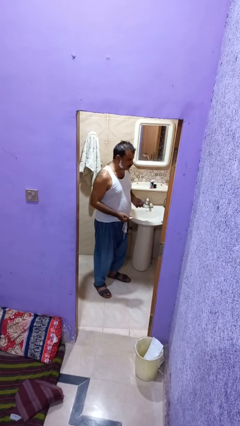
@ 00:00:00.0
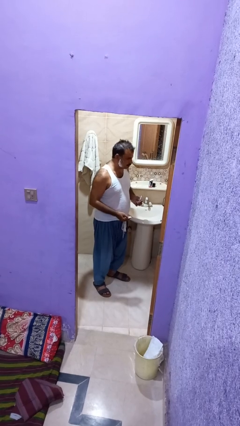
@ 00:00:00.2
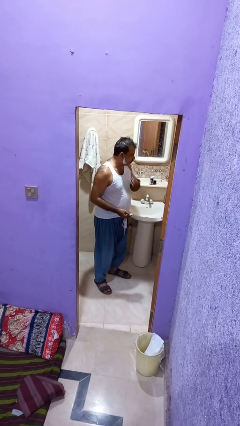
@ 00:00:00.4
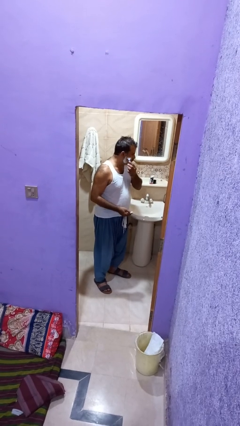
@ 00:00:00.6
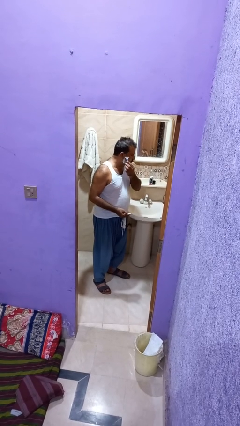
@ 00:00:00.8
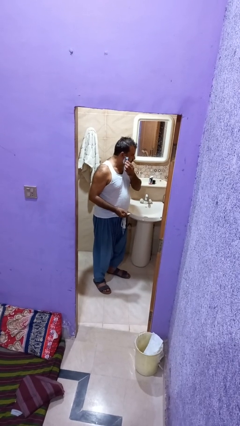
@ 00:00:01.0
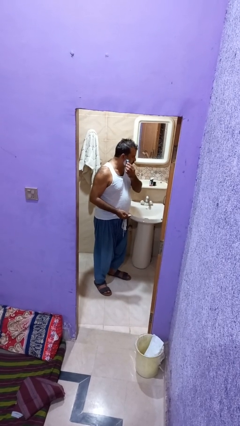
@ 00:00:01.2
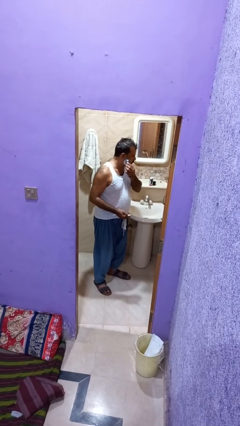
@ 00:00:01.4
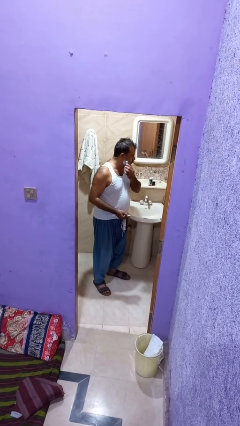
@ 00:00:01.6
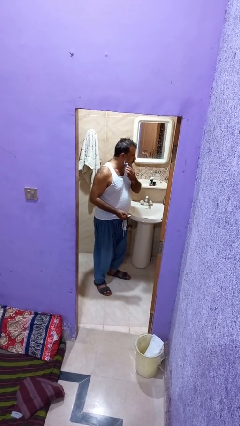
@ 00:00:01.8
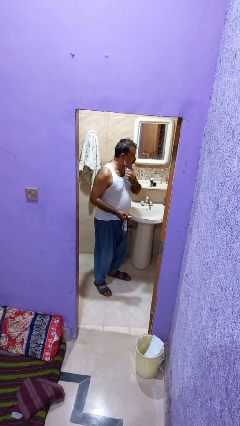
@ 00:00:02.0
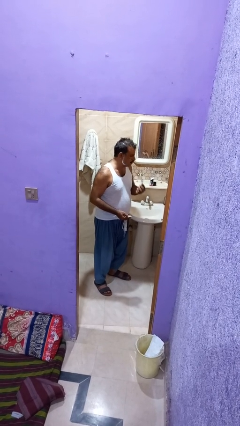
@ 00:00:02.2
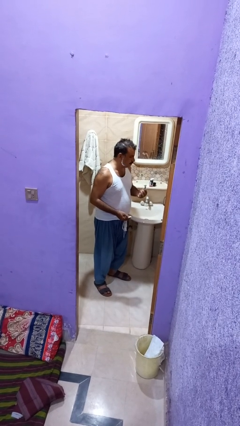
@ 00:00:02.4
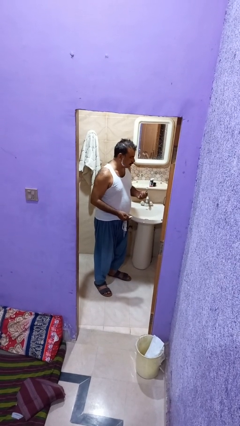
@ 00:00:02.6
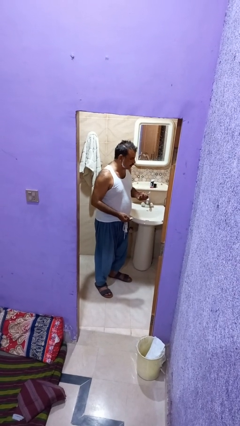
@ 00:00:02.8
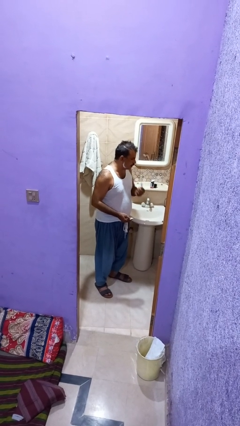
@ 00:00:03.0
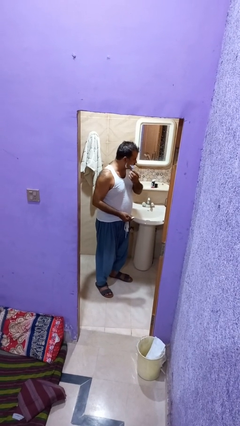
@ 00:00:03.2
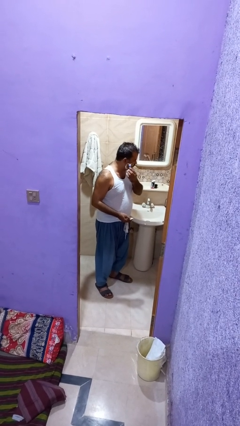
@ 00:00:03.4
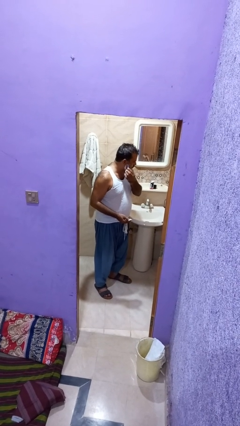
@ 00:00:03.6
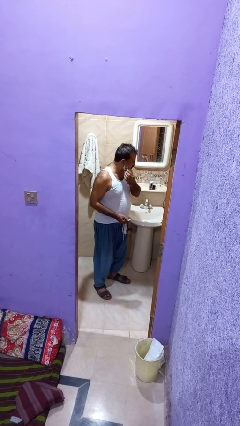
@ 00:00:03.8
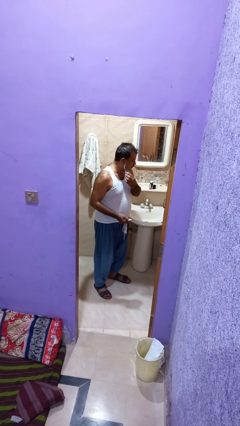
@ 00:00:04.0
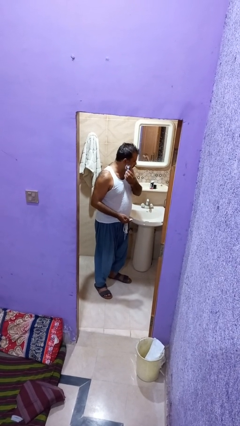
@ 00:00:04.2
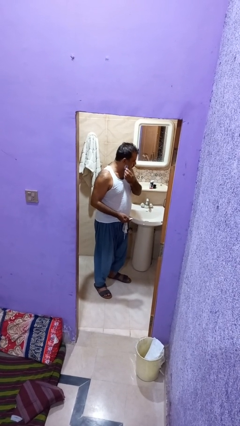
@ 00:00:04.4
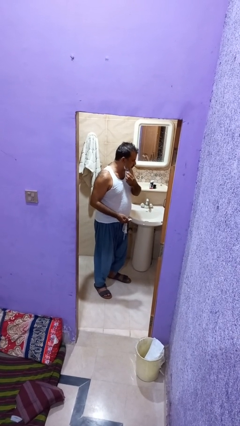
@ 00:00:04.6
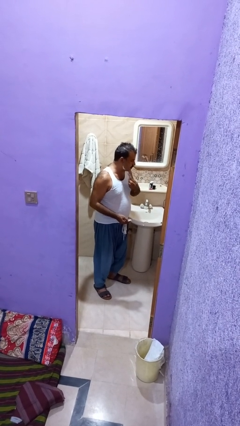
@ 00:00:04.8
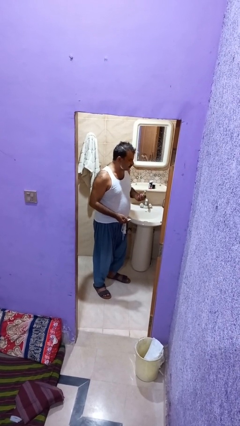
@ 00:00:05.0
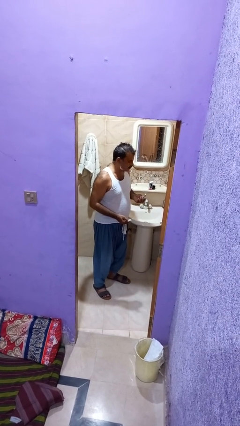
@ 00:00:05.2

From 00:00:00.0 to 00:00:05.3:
person shaves face

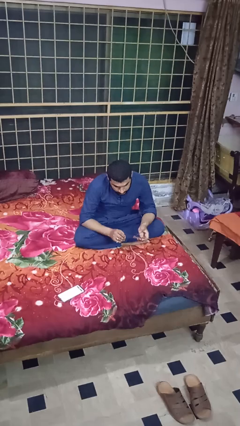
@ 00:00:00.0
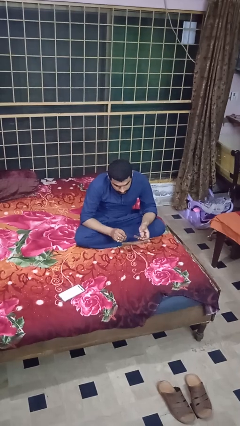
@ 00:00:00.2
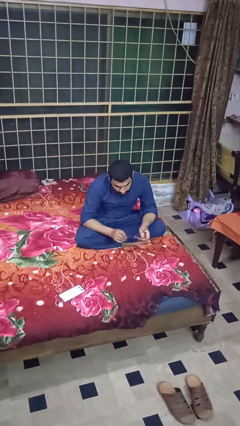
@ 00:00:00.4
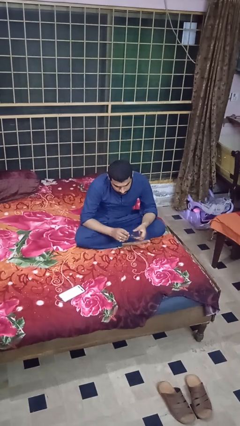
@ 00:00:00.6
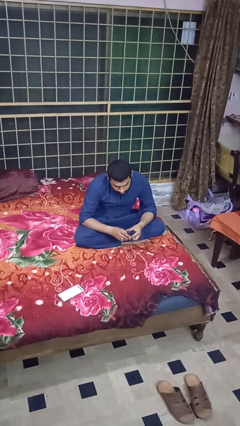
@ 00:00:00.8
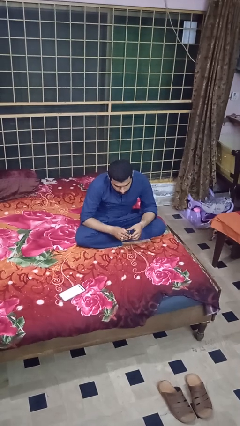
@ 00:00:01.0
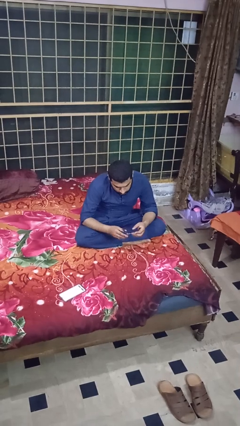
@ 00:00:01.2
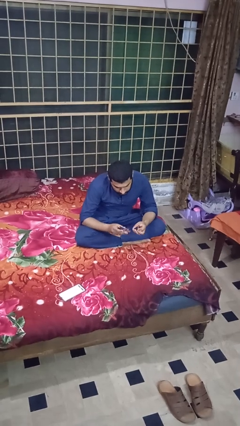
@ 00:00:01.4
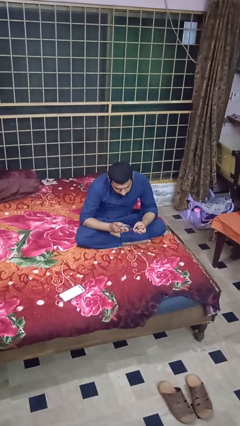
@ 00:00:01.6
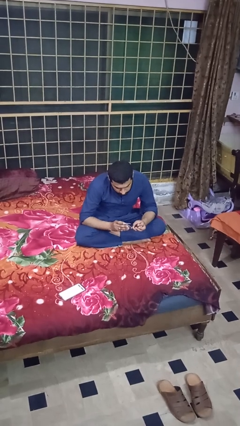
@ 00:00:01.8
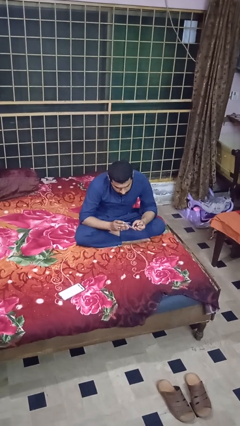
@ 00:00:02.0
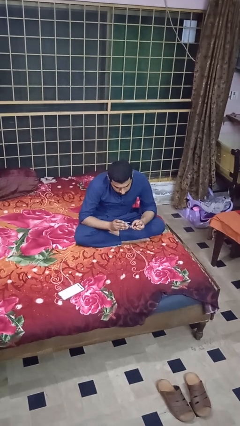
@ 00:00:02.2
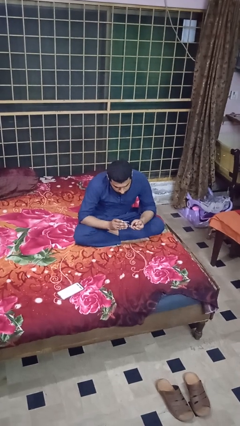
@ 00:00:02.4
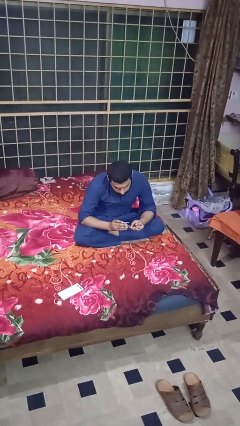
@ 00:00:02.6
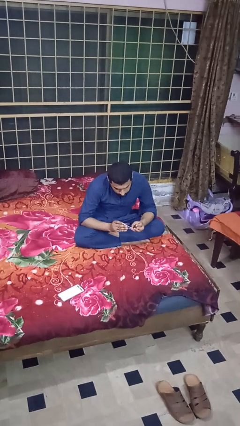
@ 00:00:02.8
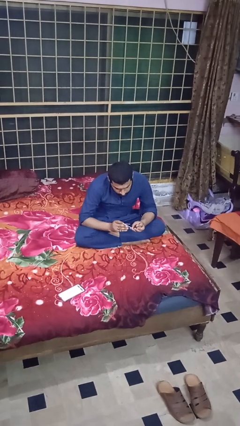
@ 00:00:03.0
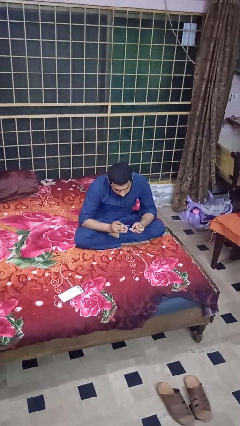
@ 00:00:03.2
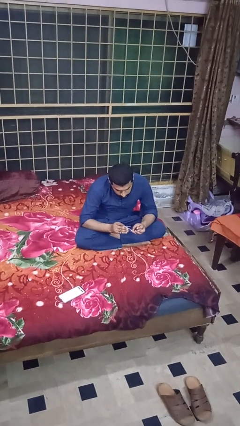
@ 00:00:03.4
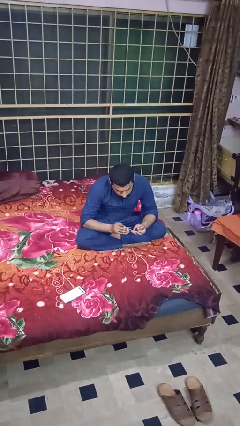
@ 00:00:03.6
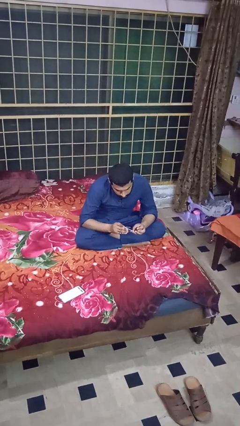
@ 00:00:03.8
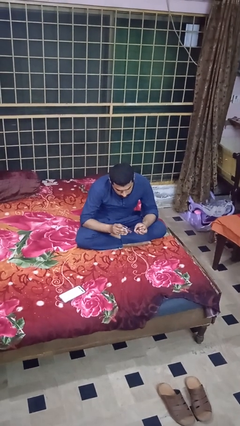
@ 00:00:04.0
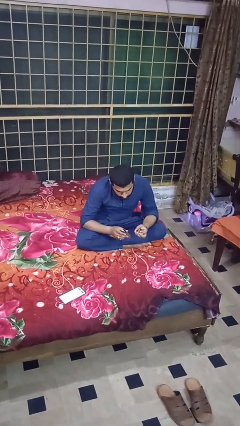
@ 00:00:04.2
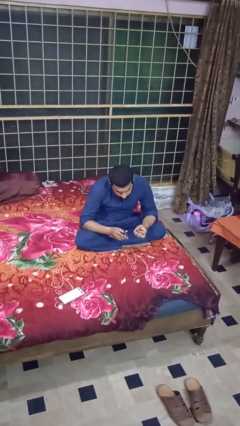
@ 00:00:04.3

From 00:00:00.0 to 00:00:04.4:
person clips fingernails

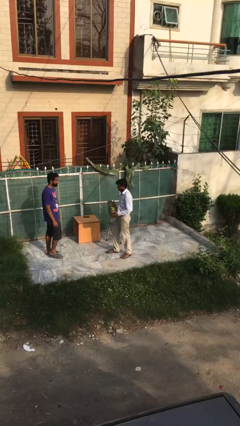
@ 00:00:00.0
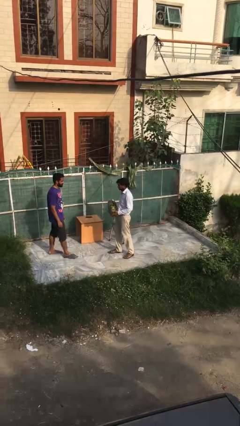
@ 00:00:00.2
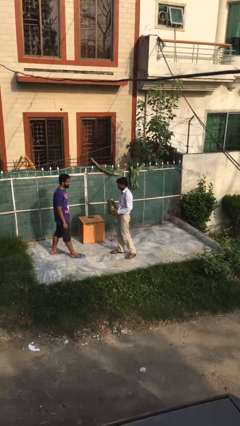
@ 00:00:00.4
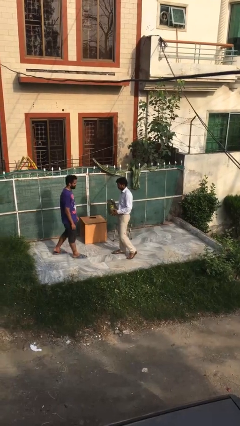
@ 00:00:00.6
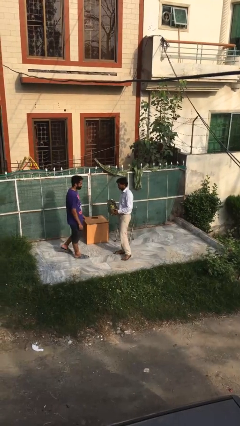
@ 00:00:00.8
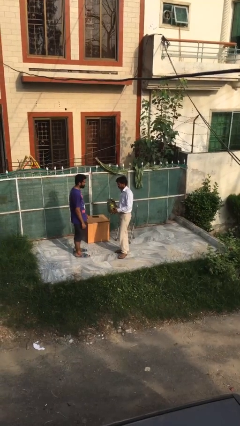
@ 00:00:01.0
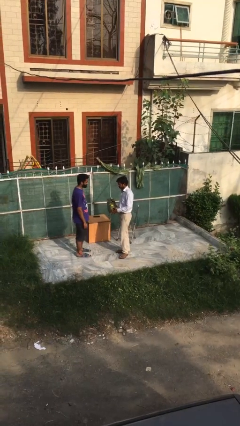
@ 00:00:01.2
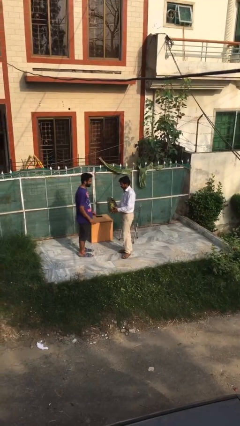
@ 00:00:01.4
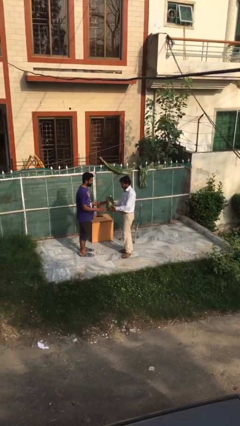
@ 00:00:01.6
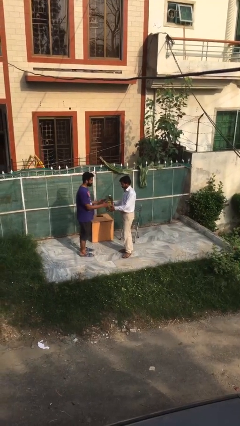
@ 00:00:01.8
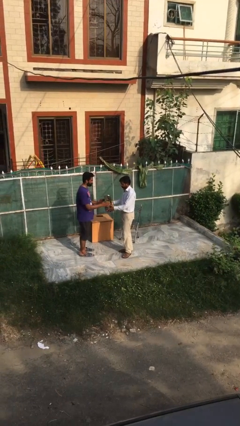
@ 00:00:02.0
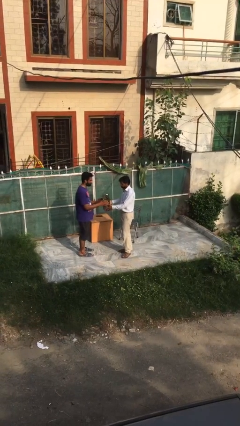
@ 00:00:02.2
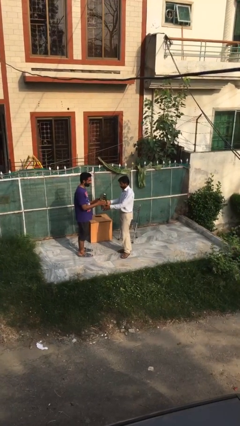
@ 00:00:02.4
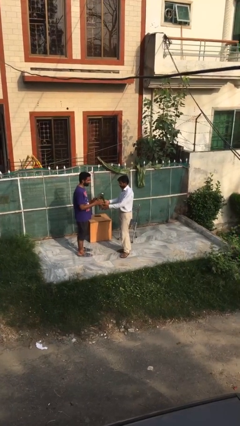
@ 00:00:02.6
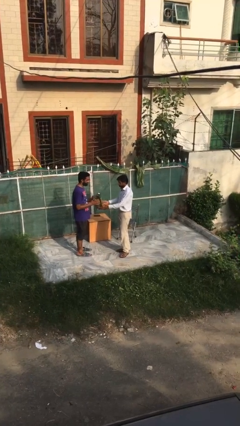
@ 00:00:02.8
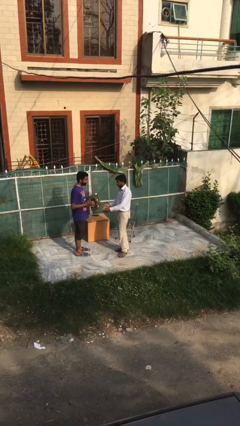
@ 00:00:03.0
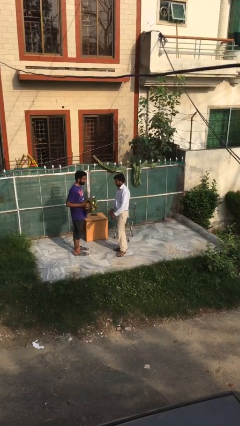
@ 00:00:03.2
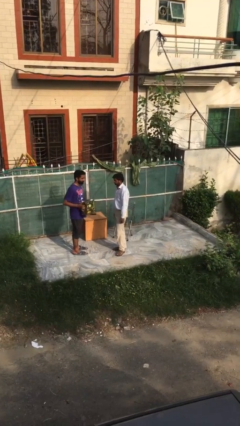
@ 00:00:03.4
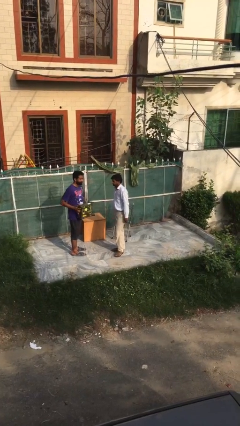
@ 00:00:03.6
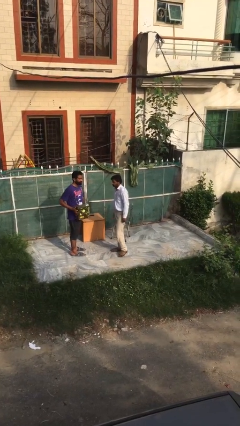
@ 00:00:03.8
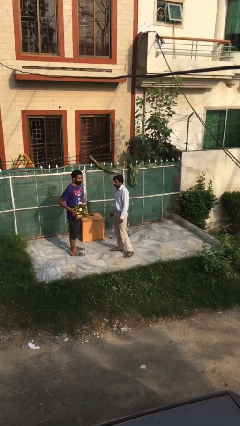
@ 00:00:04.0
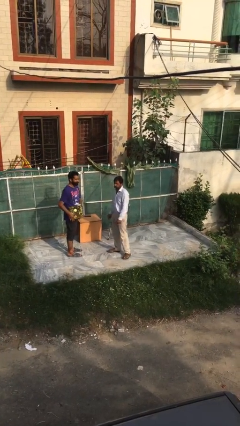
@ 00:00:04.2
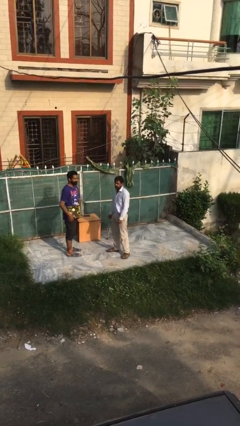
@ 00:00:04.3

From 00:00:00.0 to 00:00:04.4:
person transfers object to person

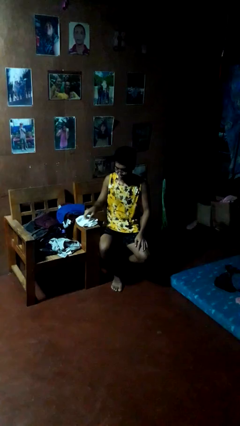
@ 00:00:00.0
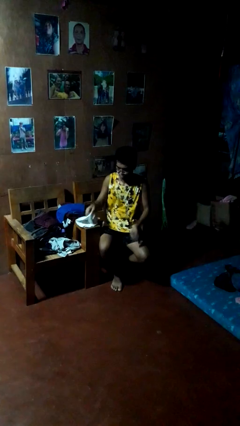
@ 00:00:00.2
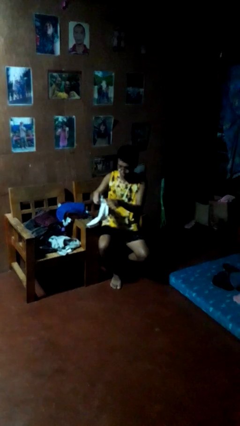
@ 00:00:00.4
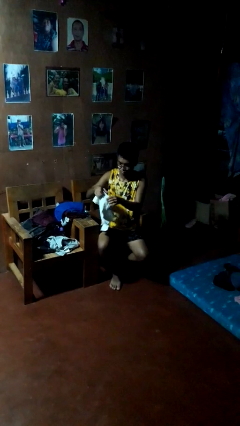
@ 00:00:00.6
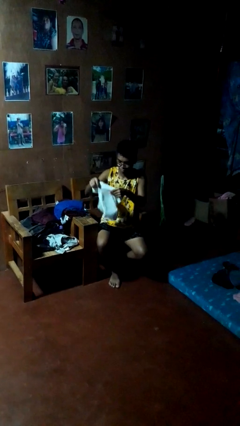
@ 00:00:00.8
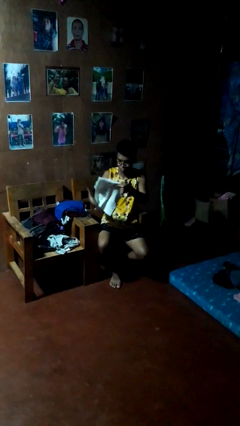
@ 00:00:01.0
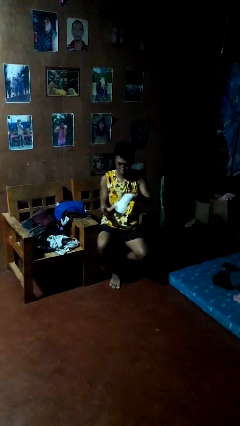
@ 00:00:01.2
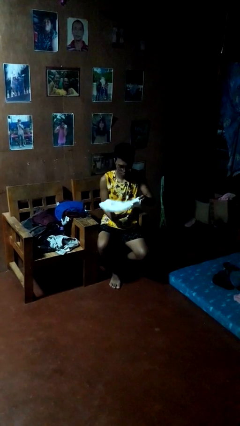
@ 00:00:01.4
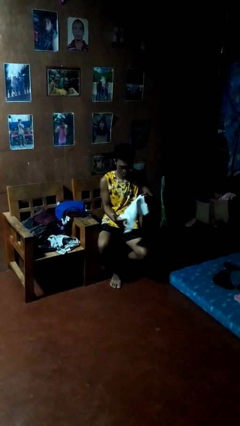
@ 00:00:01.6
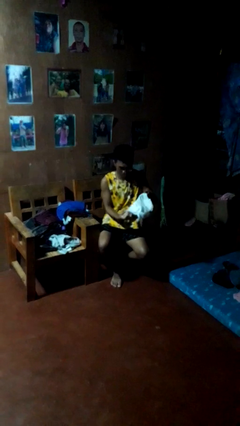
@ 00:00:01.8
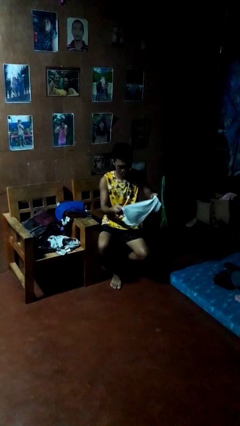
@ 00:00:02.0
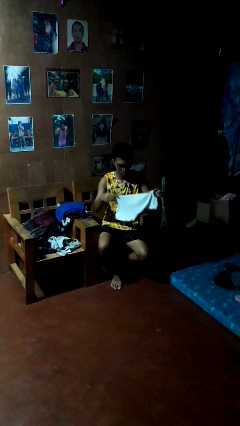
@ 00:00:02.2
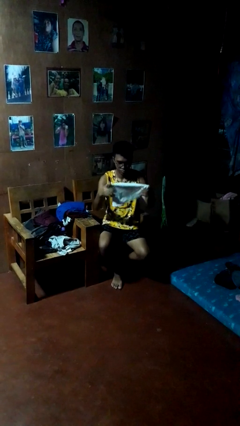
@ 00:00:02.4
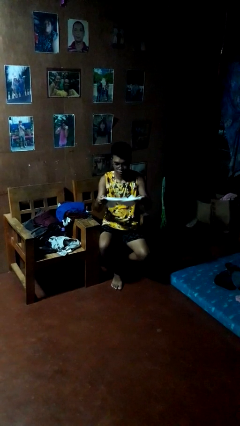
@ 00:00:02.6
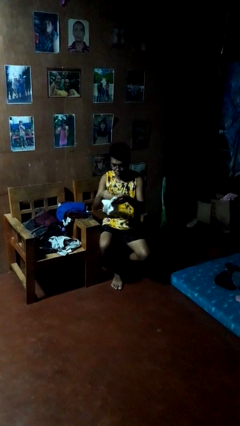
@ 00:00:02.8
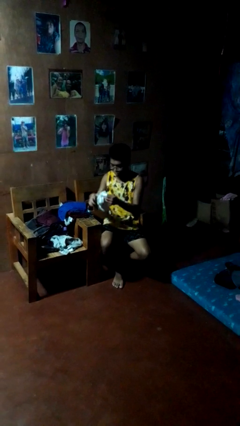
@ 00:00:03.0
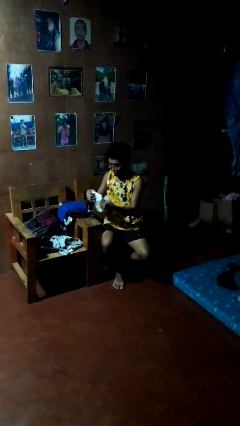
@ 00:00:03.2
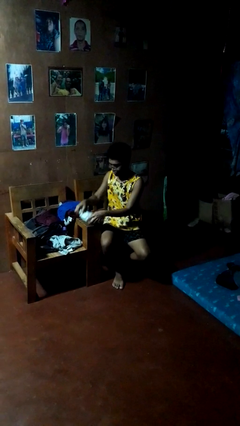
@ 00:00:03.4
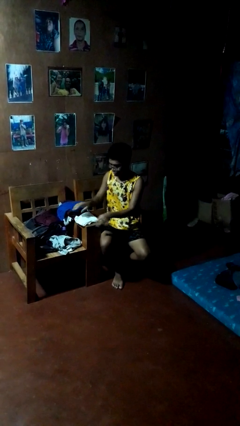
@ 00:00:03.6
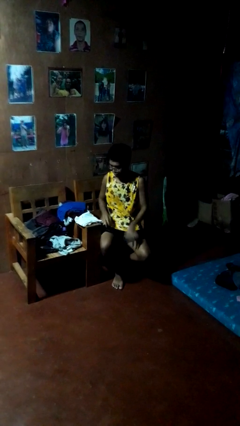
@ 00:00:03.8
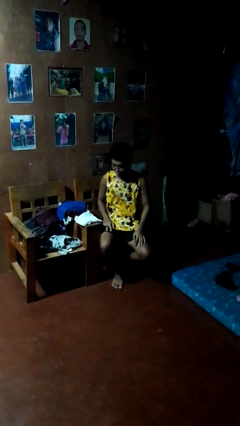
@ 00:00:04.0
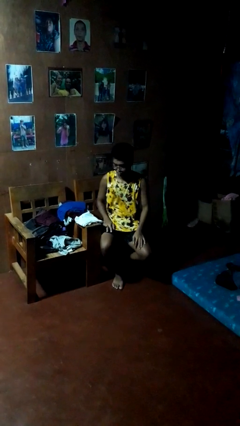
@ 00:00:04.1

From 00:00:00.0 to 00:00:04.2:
person folds shirt
